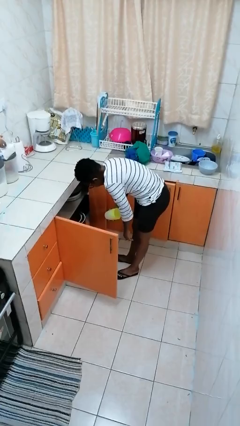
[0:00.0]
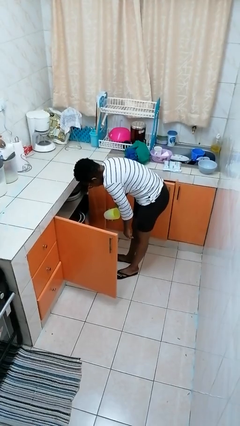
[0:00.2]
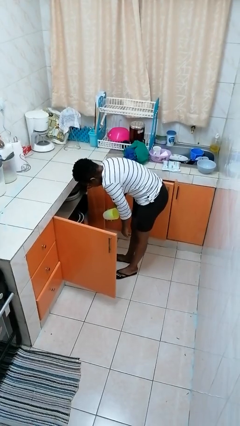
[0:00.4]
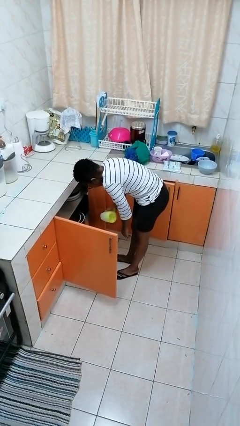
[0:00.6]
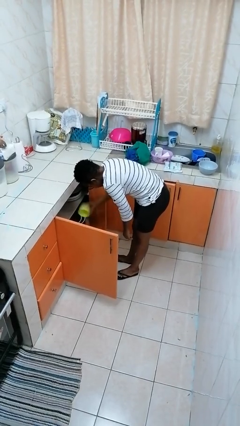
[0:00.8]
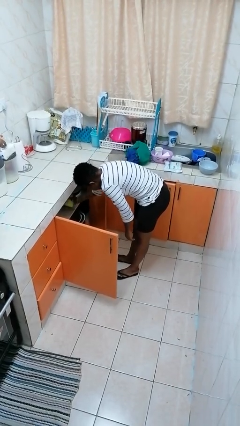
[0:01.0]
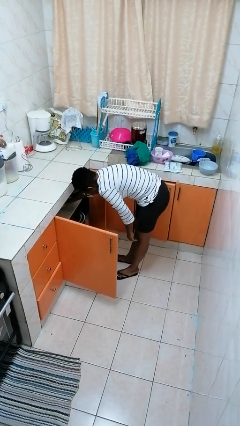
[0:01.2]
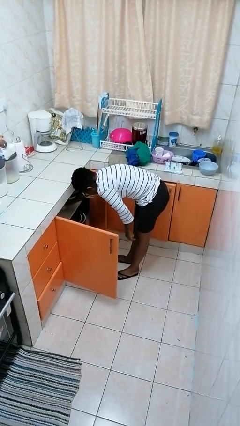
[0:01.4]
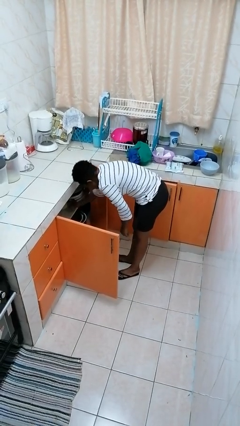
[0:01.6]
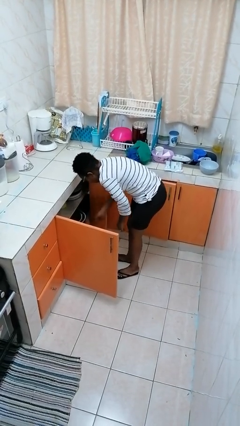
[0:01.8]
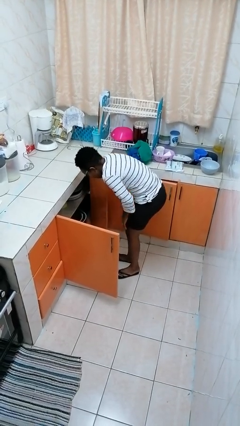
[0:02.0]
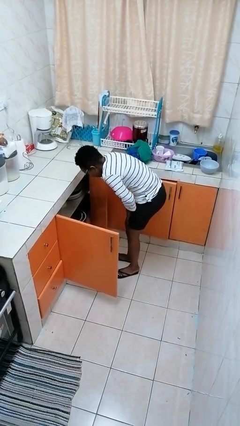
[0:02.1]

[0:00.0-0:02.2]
person puts object in cabinet

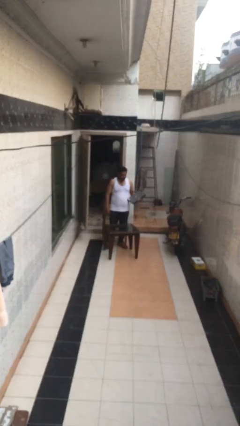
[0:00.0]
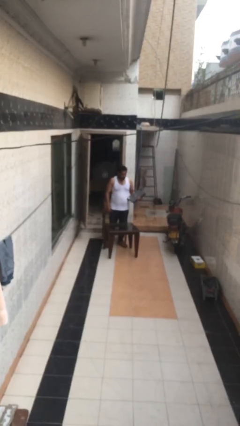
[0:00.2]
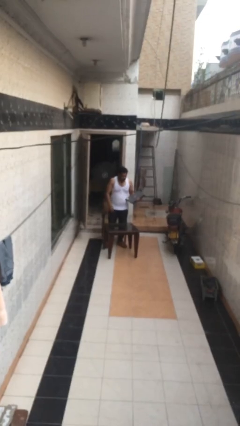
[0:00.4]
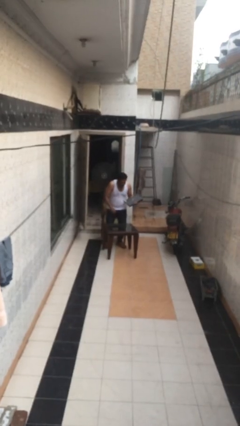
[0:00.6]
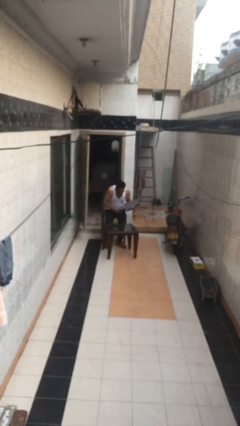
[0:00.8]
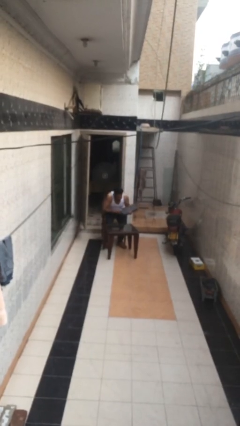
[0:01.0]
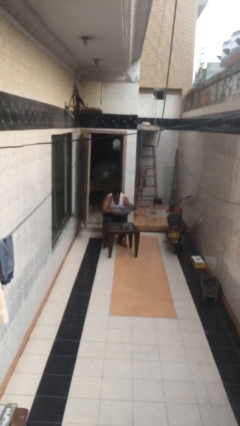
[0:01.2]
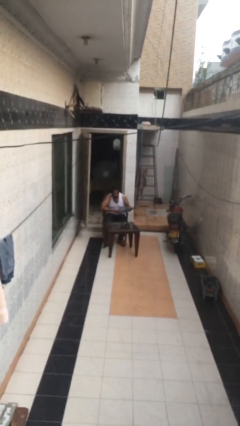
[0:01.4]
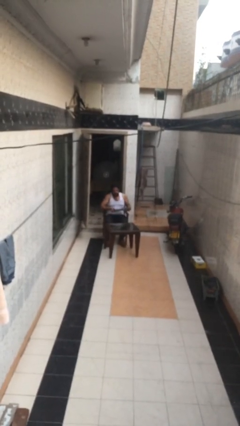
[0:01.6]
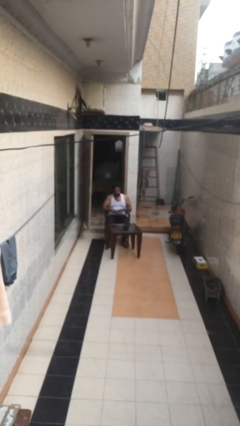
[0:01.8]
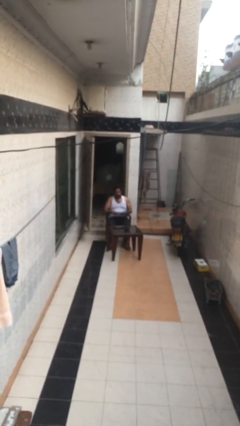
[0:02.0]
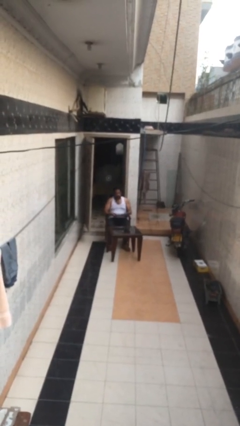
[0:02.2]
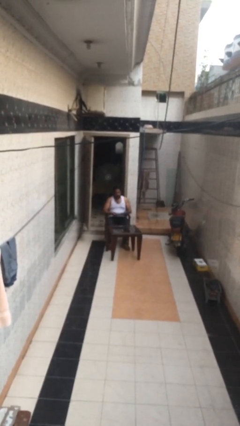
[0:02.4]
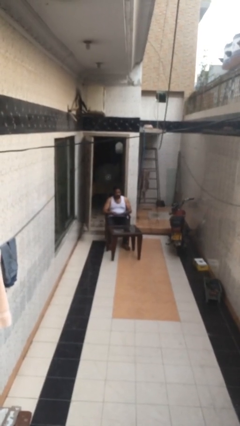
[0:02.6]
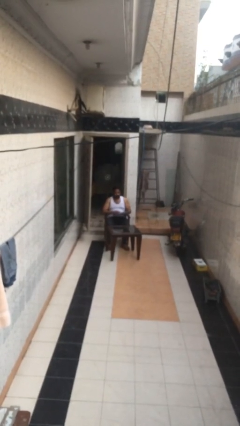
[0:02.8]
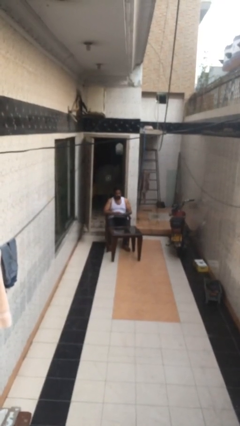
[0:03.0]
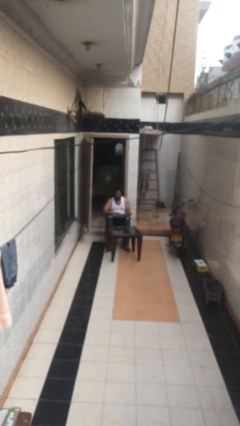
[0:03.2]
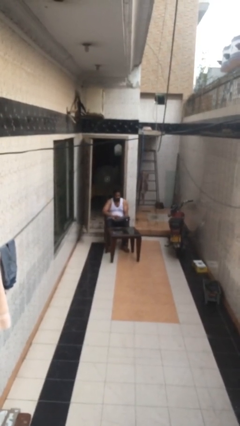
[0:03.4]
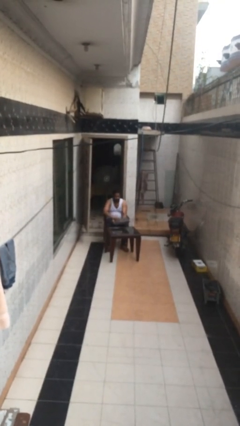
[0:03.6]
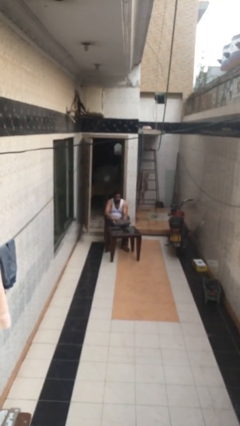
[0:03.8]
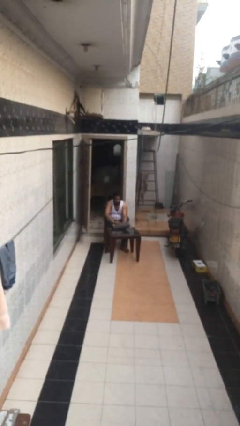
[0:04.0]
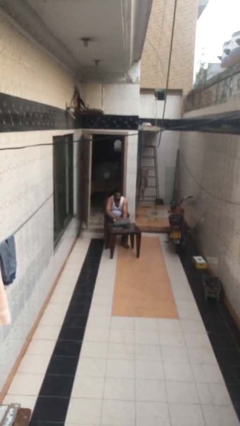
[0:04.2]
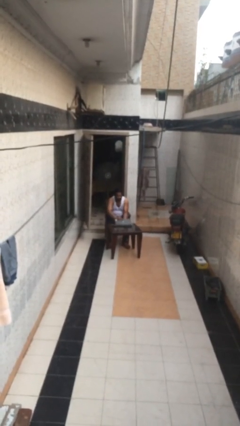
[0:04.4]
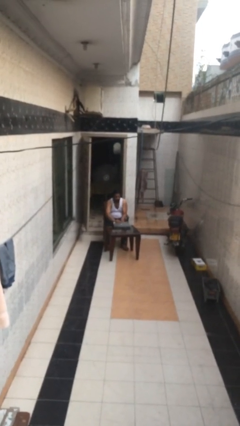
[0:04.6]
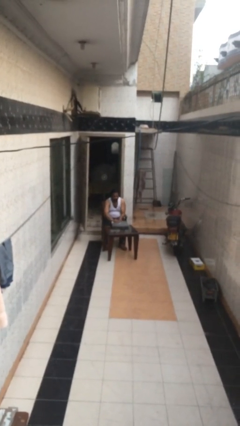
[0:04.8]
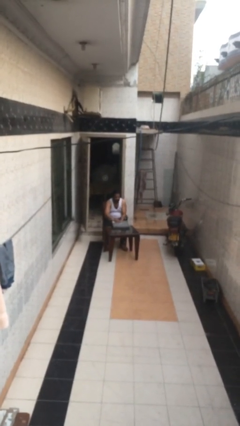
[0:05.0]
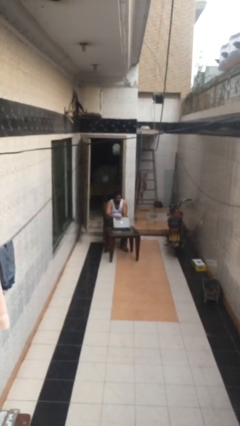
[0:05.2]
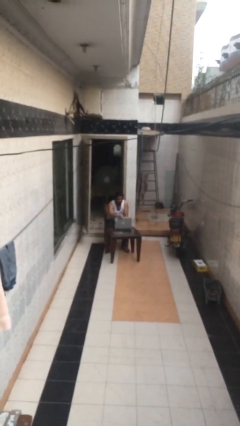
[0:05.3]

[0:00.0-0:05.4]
person sits down

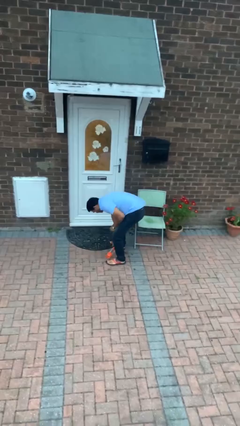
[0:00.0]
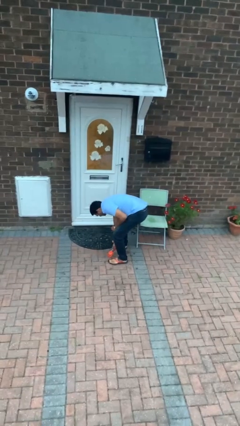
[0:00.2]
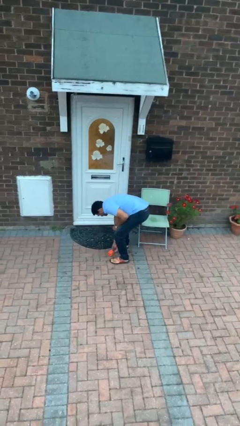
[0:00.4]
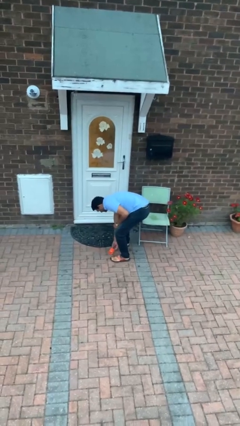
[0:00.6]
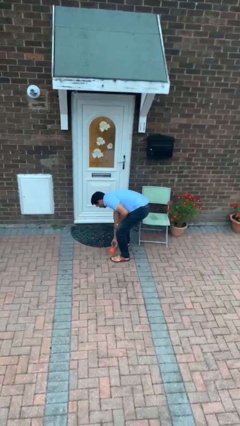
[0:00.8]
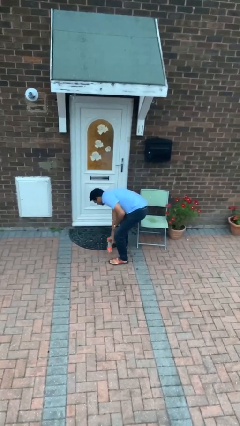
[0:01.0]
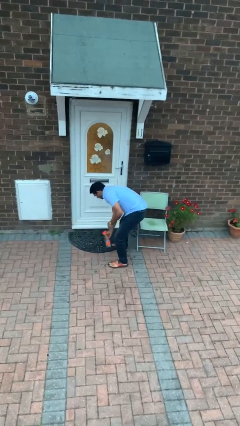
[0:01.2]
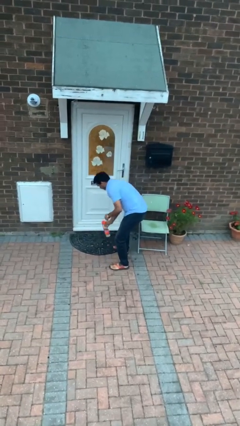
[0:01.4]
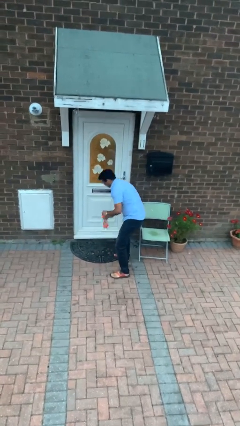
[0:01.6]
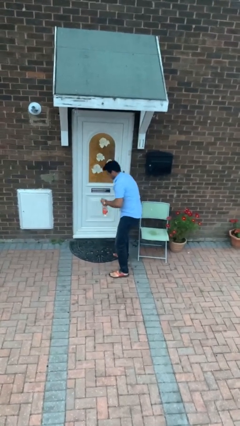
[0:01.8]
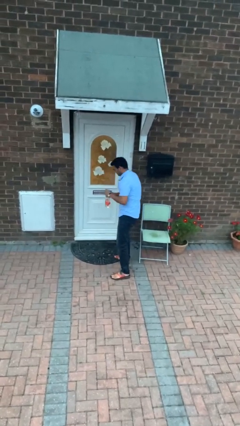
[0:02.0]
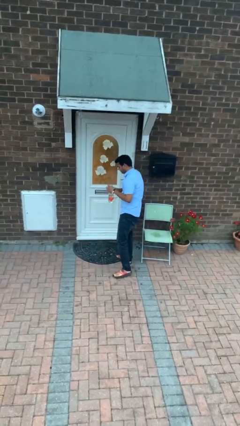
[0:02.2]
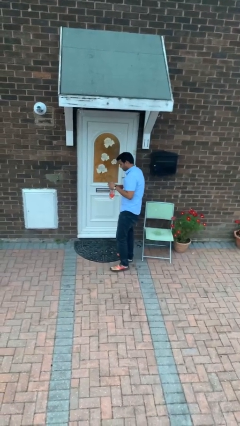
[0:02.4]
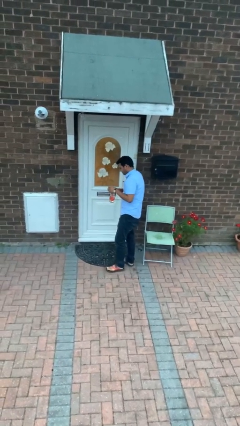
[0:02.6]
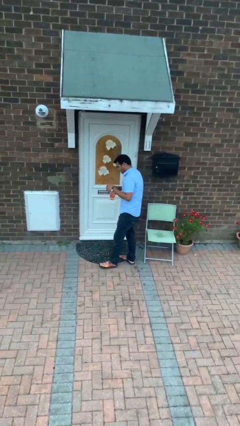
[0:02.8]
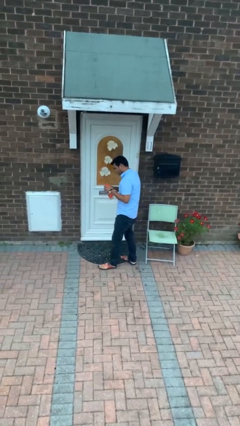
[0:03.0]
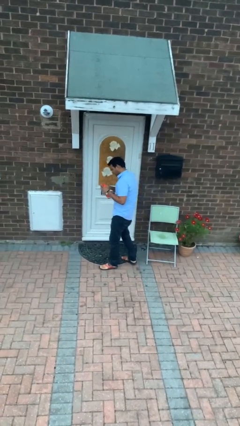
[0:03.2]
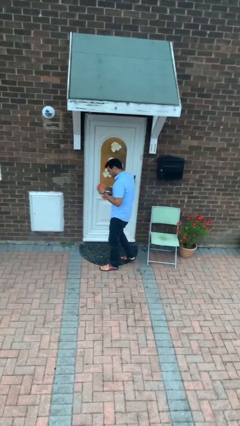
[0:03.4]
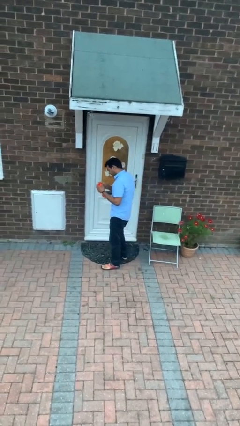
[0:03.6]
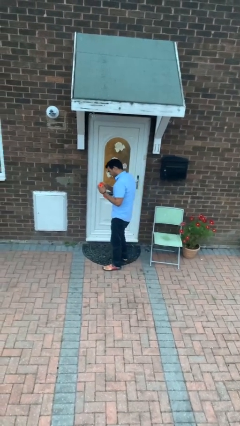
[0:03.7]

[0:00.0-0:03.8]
person picks up object from floor

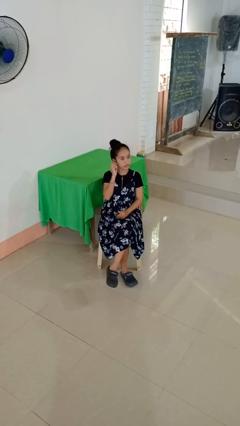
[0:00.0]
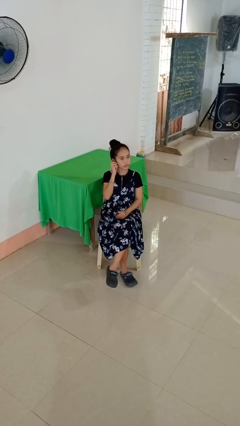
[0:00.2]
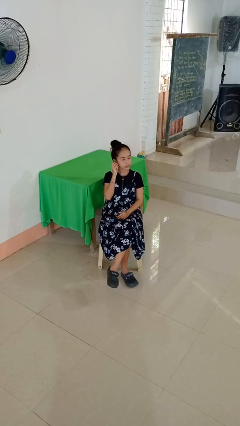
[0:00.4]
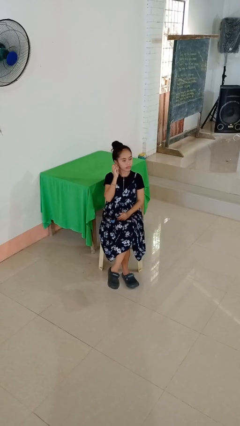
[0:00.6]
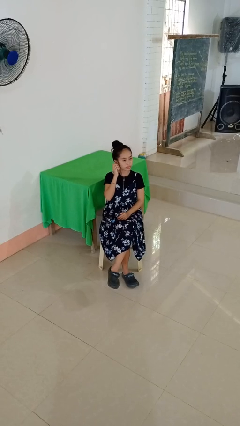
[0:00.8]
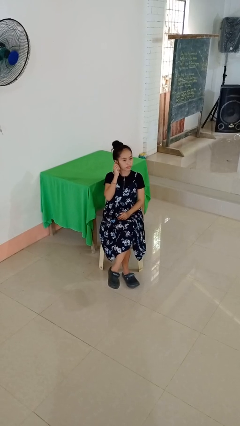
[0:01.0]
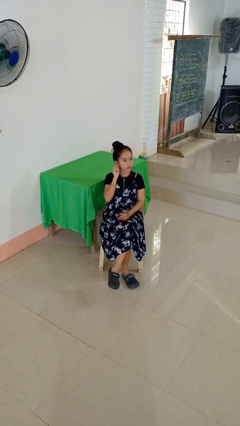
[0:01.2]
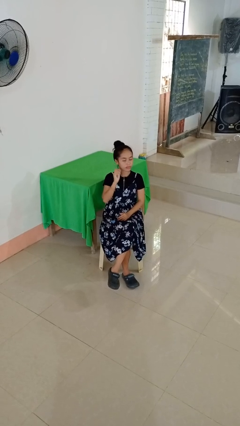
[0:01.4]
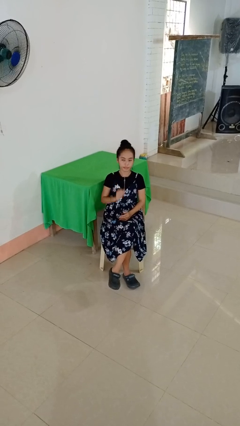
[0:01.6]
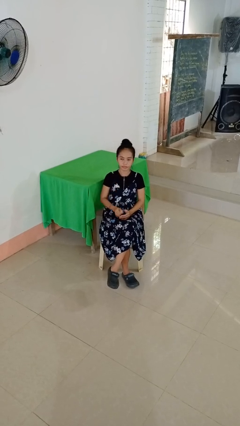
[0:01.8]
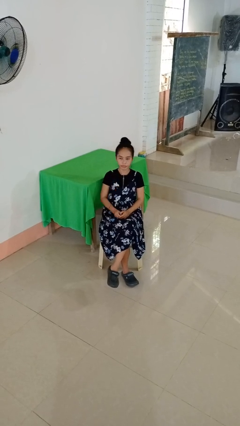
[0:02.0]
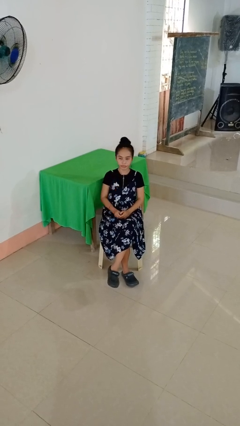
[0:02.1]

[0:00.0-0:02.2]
person touches earlobe

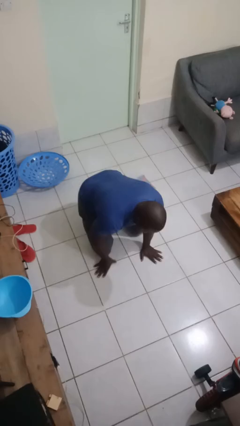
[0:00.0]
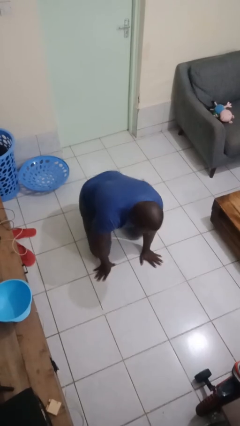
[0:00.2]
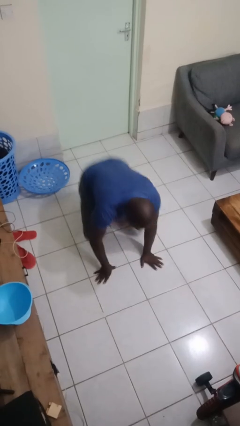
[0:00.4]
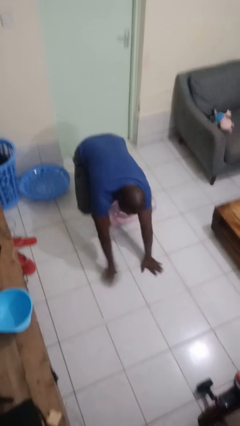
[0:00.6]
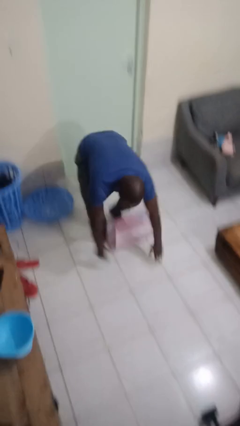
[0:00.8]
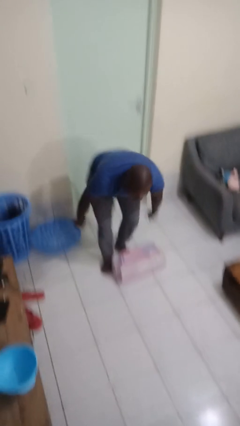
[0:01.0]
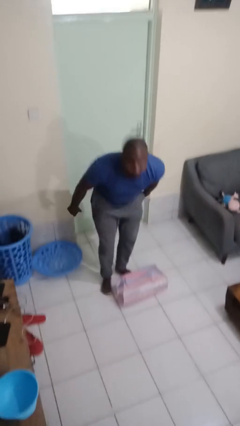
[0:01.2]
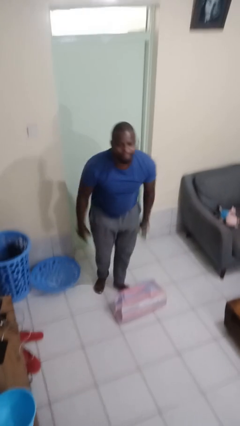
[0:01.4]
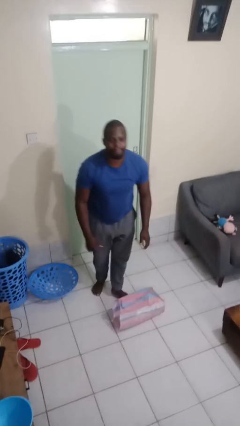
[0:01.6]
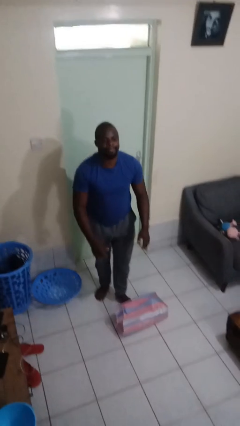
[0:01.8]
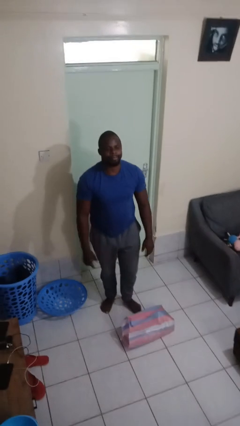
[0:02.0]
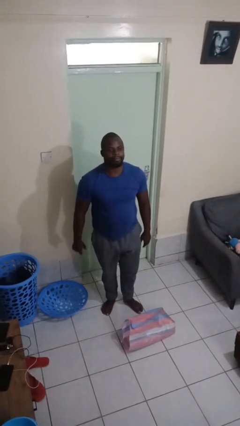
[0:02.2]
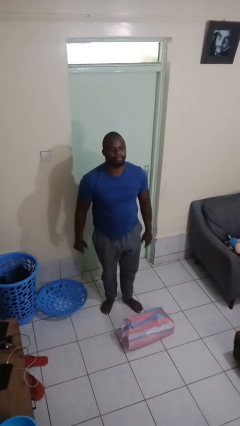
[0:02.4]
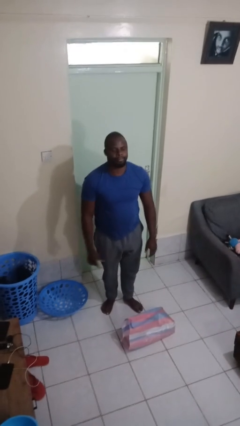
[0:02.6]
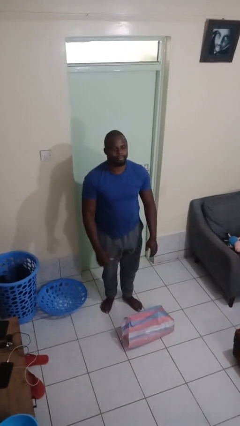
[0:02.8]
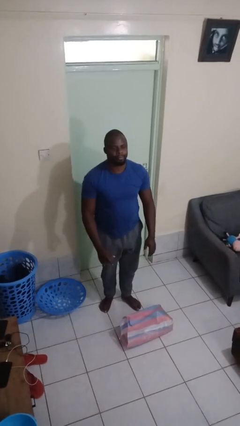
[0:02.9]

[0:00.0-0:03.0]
person stands up from floor

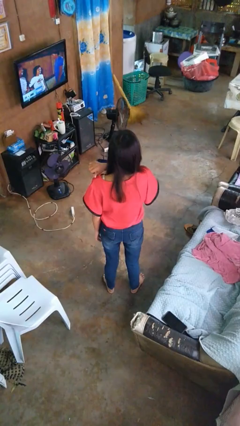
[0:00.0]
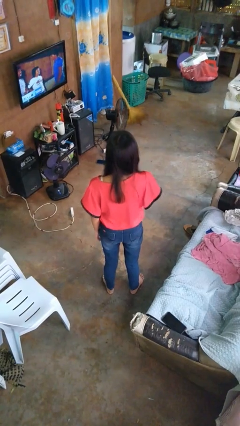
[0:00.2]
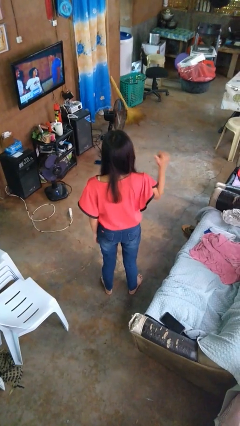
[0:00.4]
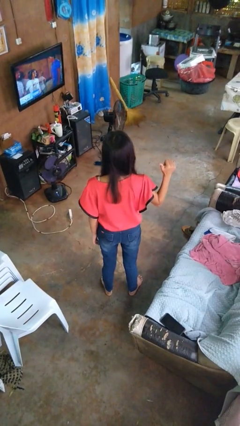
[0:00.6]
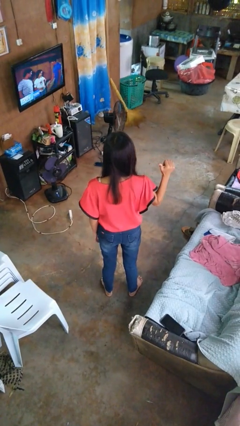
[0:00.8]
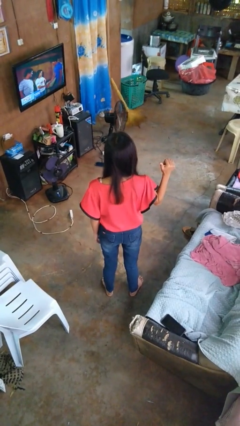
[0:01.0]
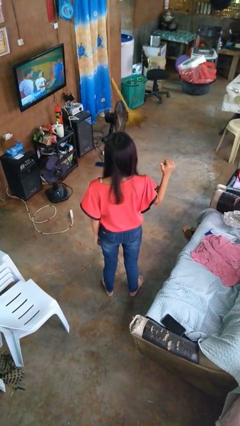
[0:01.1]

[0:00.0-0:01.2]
person gestures cut
